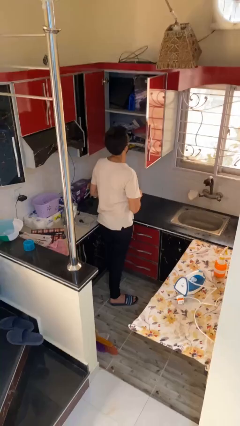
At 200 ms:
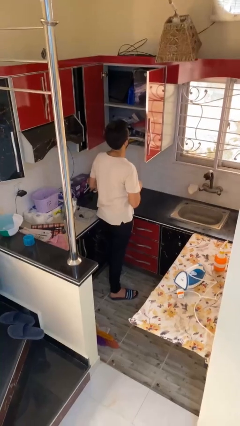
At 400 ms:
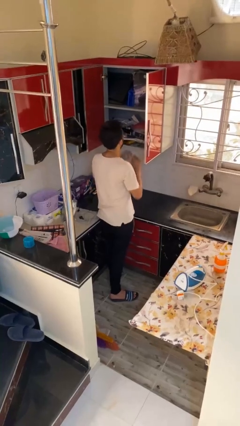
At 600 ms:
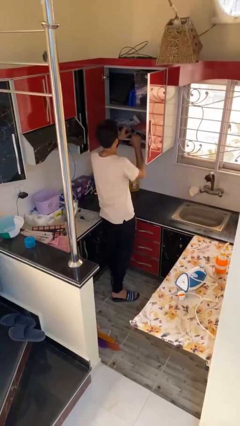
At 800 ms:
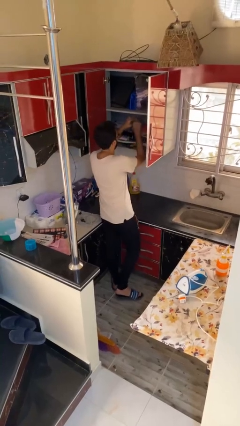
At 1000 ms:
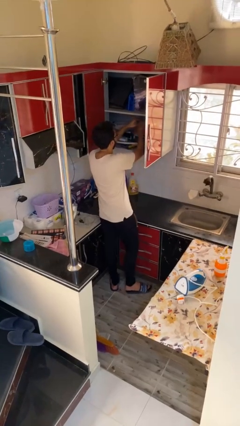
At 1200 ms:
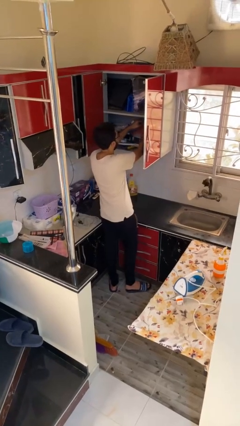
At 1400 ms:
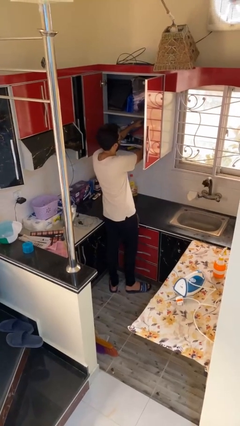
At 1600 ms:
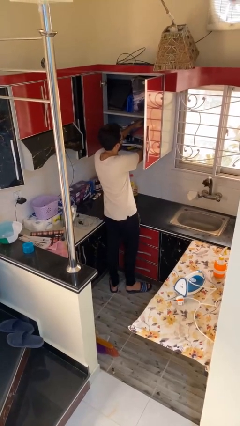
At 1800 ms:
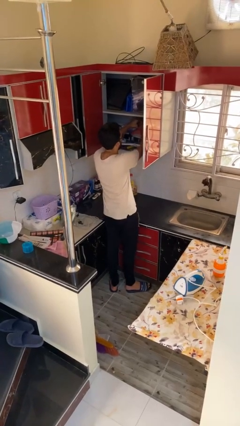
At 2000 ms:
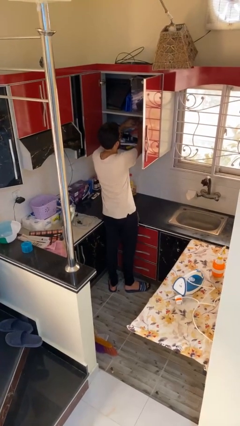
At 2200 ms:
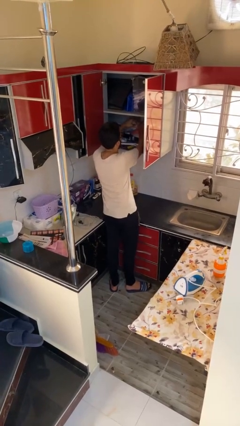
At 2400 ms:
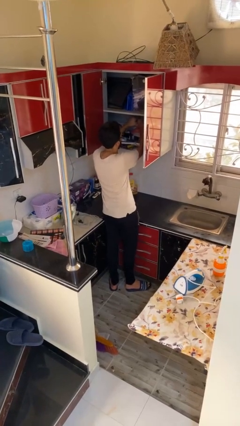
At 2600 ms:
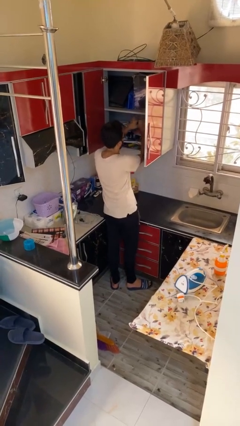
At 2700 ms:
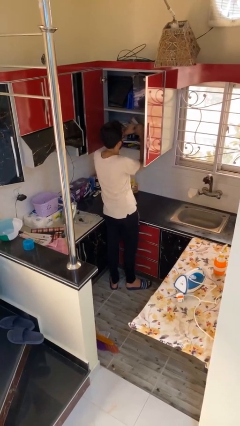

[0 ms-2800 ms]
person searches in cabinet

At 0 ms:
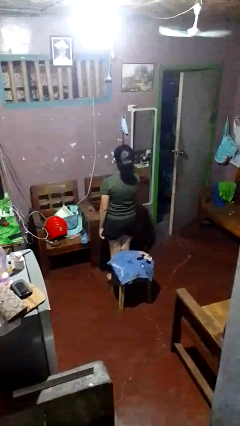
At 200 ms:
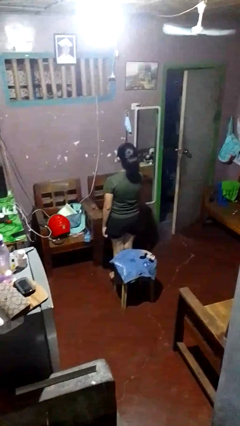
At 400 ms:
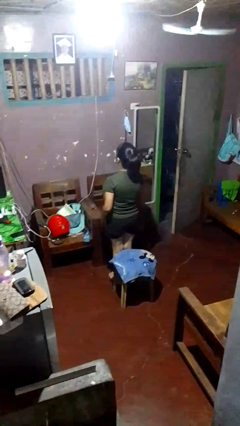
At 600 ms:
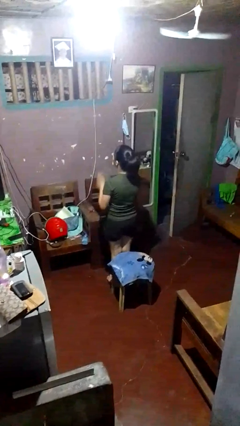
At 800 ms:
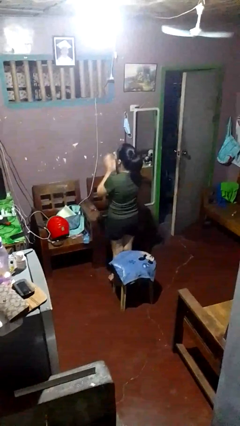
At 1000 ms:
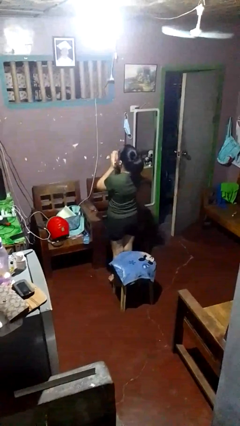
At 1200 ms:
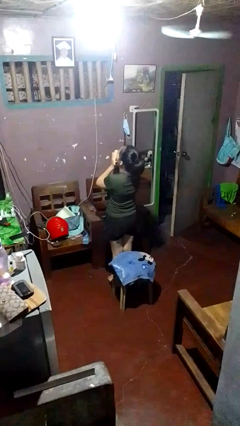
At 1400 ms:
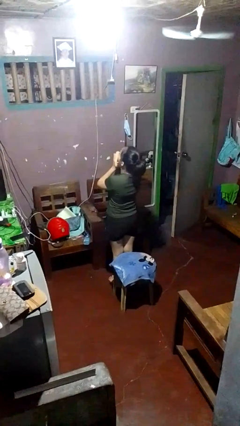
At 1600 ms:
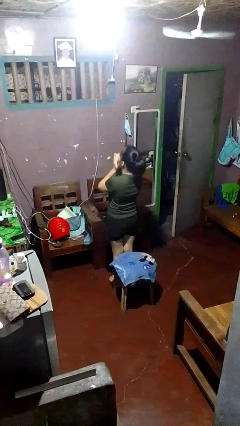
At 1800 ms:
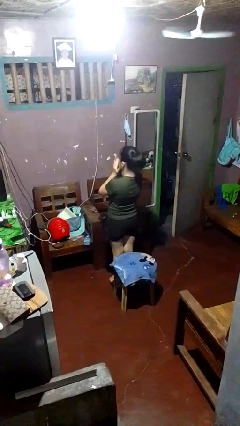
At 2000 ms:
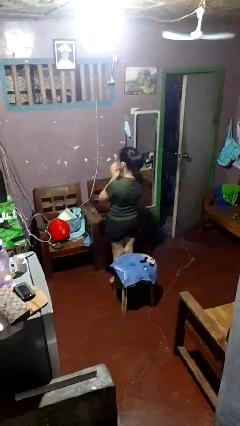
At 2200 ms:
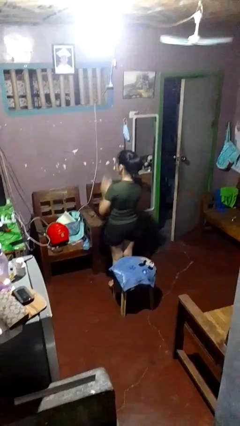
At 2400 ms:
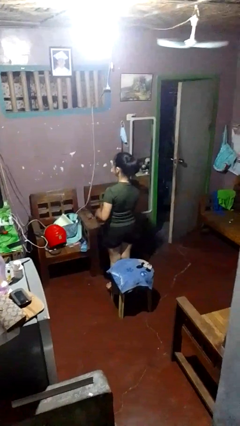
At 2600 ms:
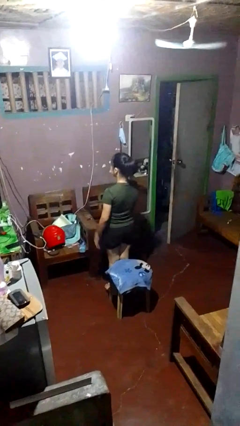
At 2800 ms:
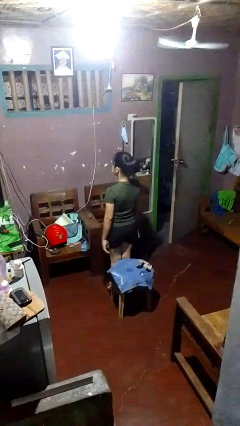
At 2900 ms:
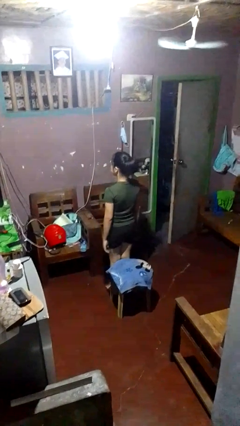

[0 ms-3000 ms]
person yawns

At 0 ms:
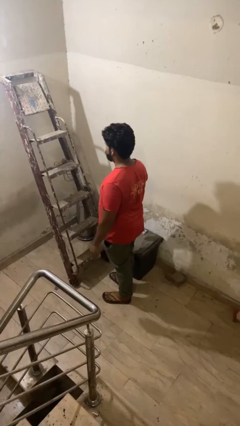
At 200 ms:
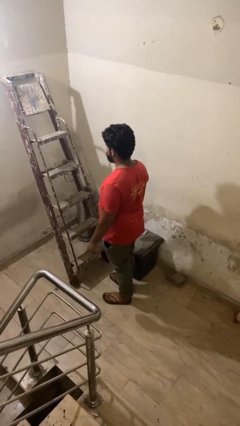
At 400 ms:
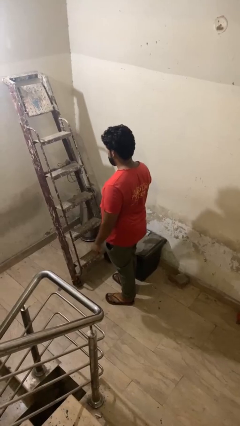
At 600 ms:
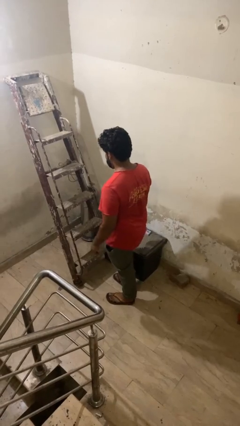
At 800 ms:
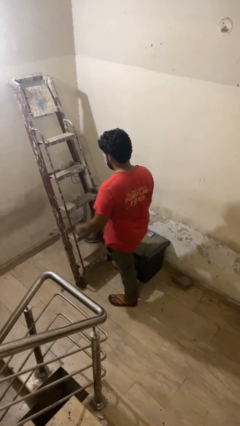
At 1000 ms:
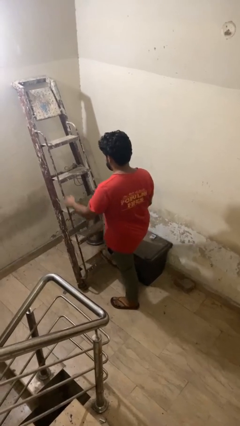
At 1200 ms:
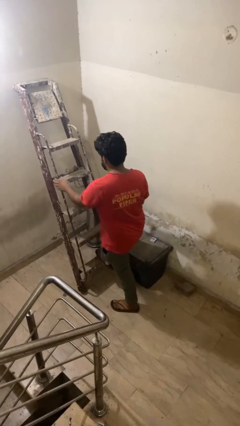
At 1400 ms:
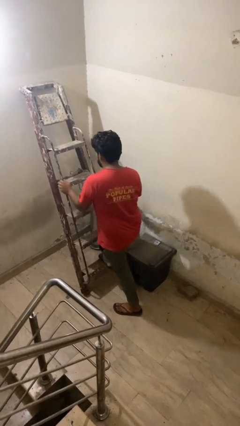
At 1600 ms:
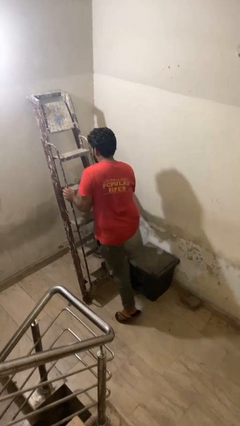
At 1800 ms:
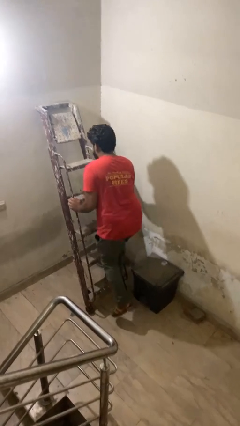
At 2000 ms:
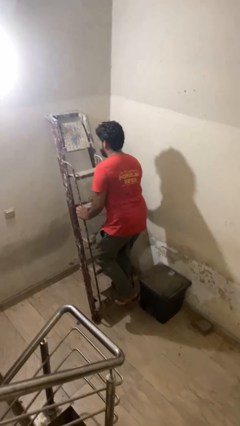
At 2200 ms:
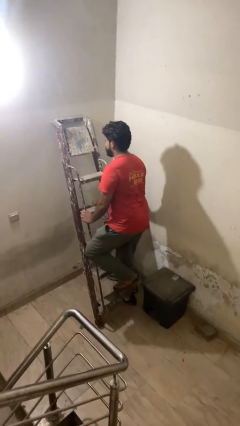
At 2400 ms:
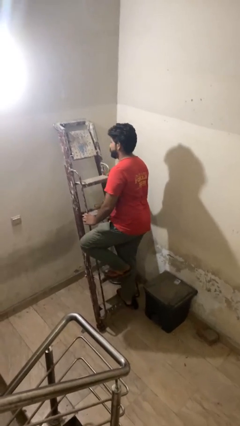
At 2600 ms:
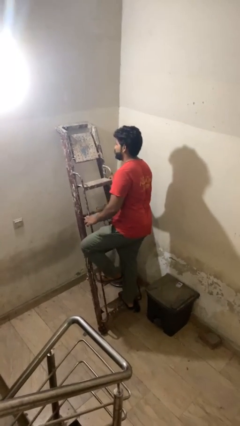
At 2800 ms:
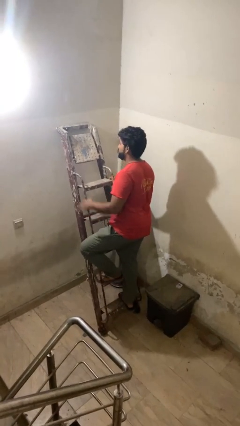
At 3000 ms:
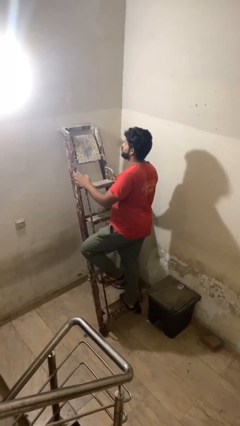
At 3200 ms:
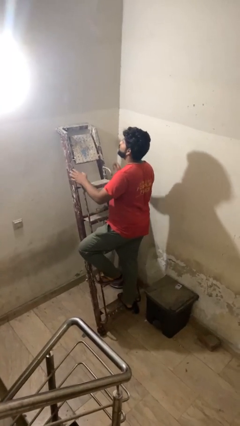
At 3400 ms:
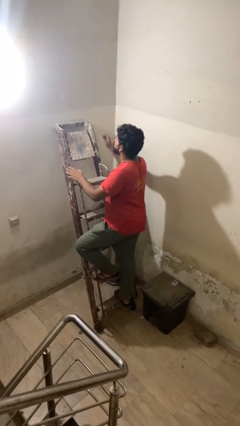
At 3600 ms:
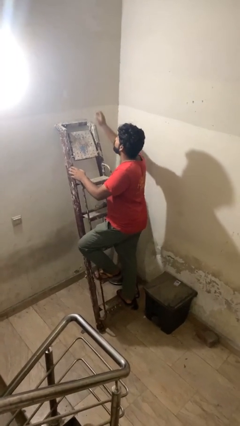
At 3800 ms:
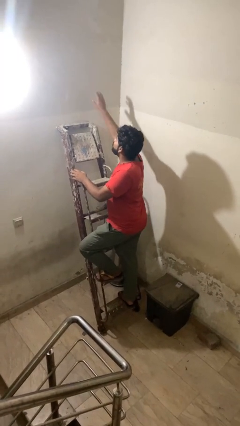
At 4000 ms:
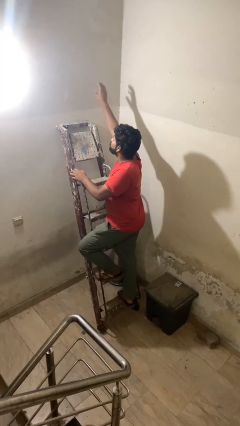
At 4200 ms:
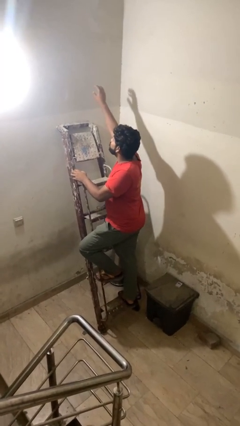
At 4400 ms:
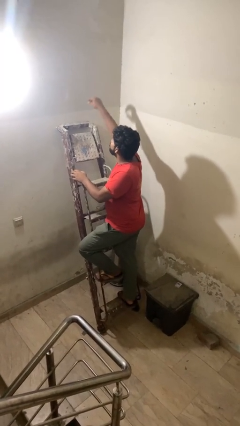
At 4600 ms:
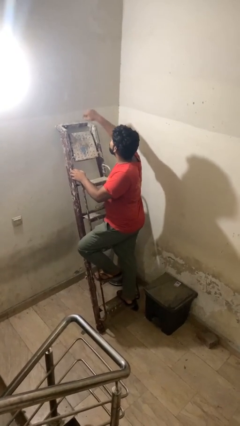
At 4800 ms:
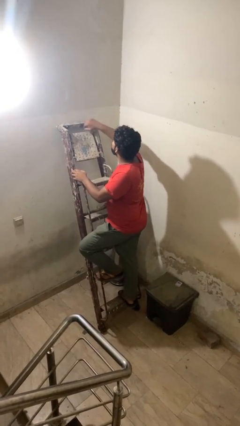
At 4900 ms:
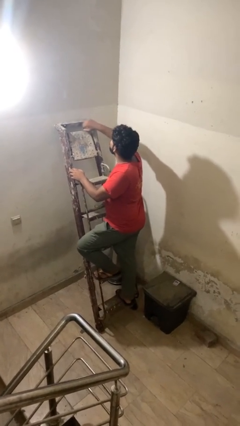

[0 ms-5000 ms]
person climbs up ladder

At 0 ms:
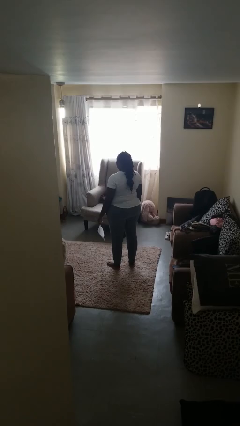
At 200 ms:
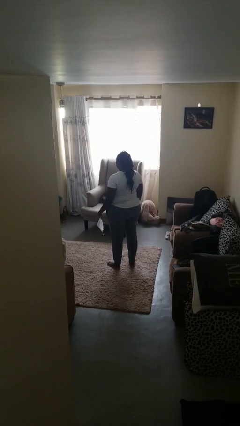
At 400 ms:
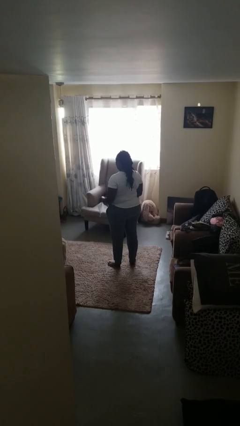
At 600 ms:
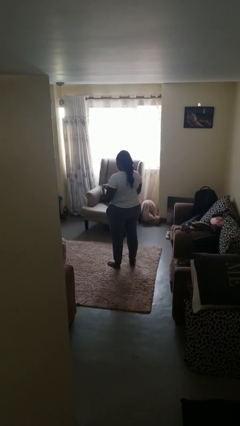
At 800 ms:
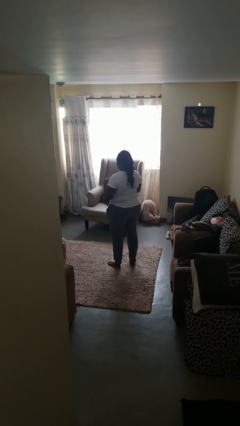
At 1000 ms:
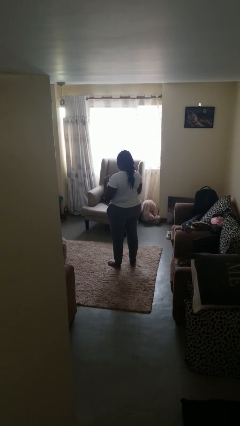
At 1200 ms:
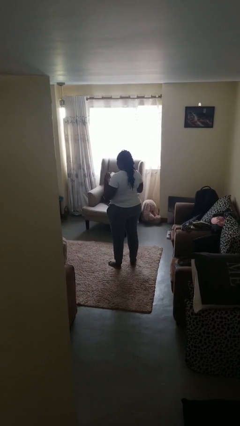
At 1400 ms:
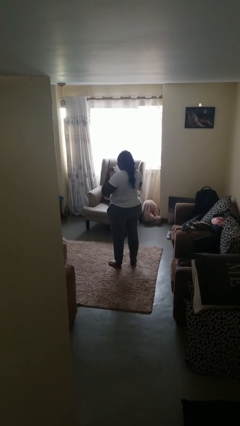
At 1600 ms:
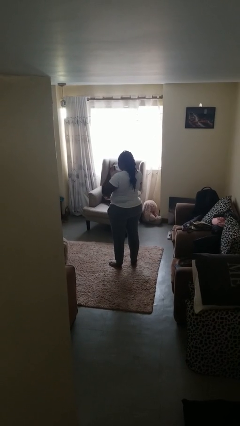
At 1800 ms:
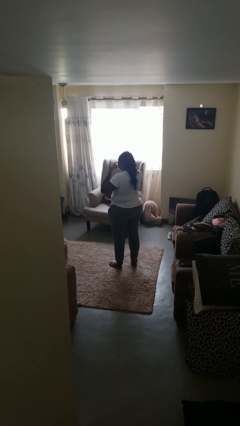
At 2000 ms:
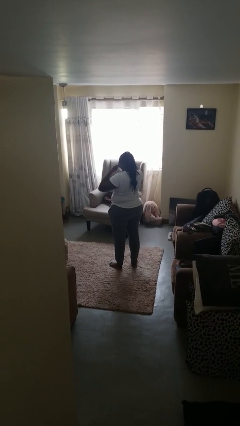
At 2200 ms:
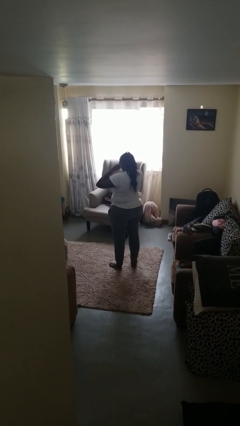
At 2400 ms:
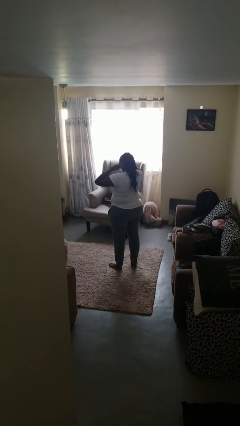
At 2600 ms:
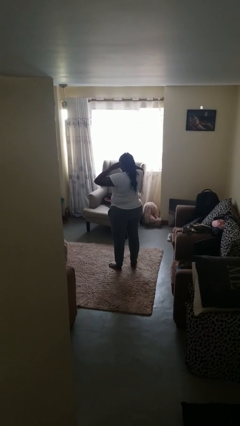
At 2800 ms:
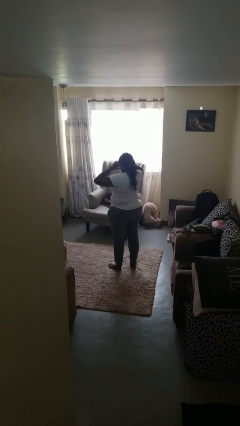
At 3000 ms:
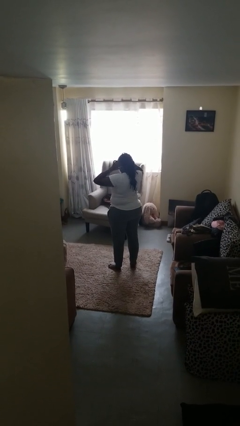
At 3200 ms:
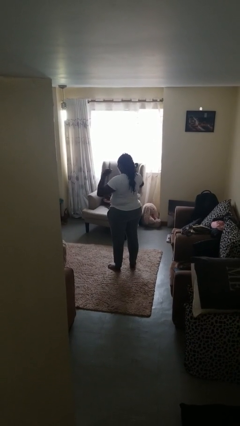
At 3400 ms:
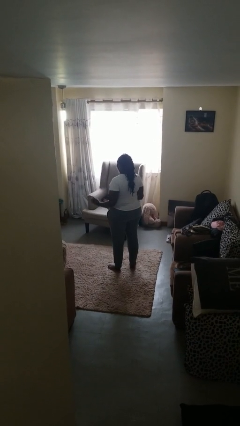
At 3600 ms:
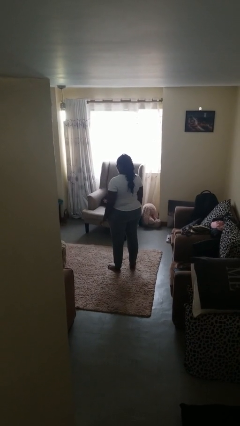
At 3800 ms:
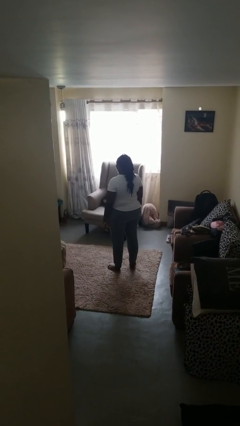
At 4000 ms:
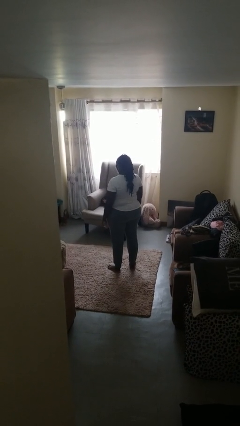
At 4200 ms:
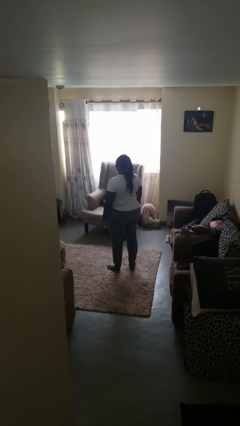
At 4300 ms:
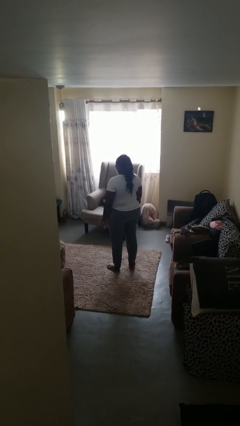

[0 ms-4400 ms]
person puts on facemask

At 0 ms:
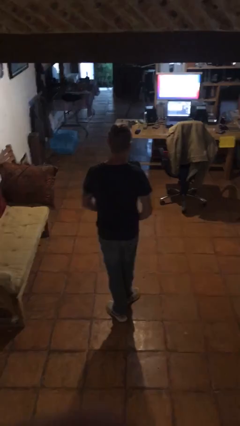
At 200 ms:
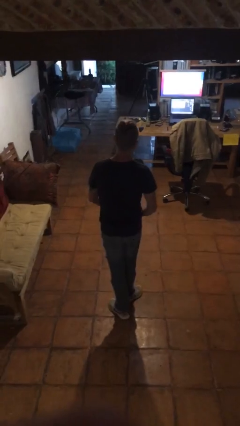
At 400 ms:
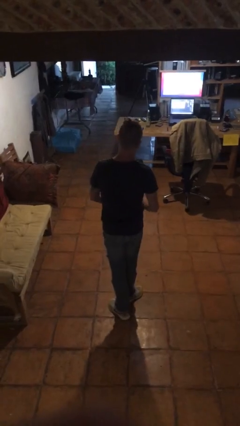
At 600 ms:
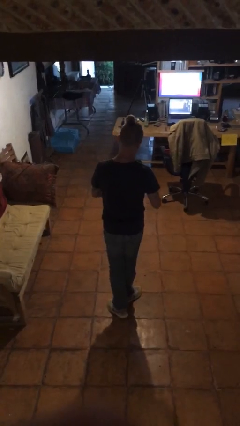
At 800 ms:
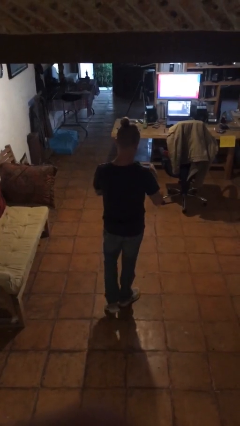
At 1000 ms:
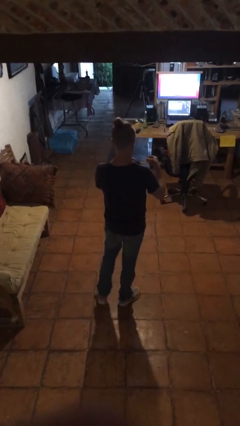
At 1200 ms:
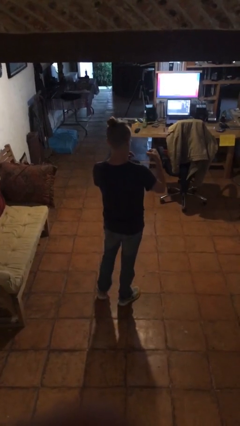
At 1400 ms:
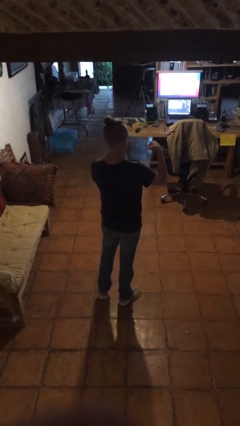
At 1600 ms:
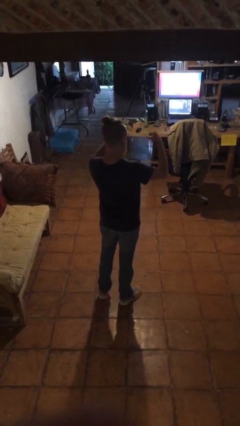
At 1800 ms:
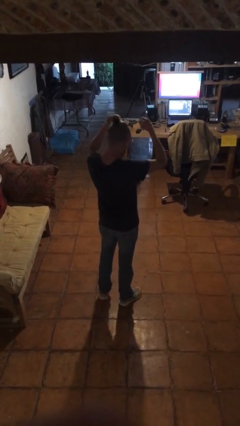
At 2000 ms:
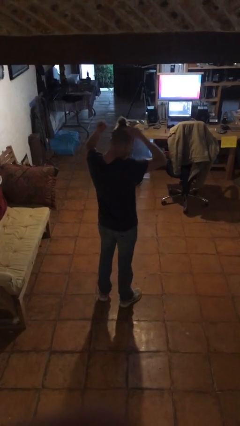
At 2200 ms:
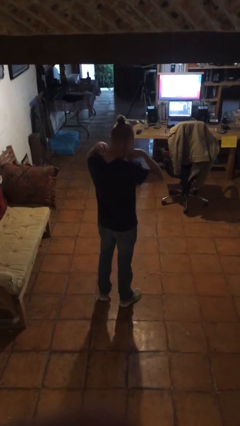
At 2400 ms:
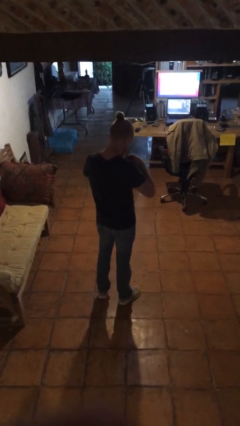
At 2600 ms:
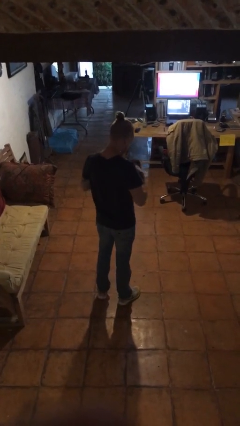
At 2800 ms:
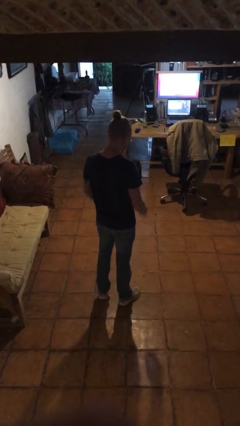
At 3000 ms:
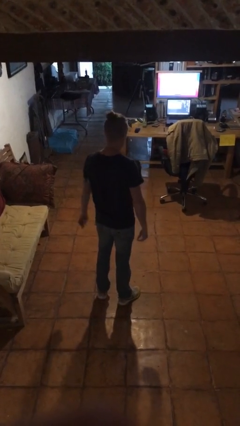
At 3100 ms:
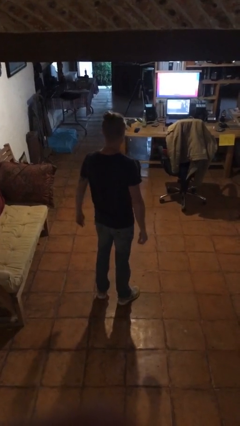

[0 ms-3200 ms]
person puts on necklace
